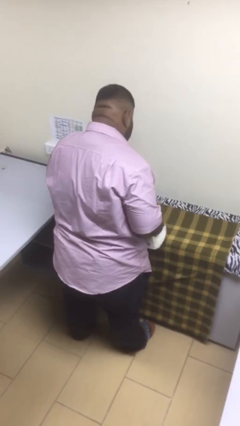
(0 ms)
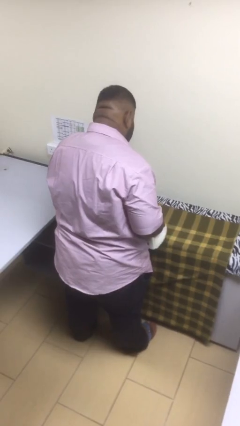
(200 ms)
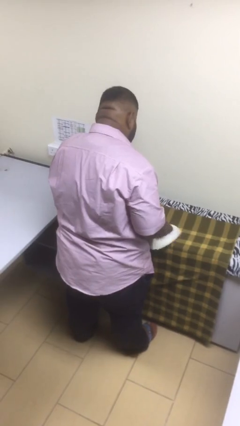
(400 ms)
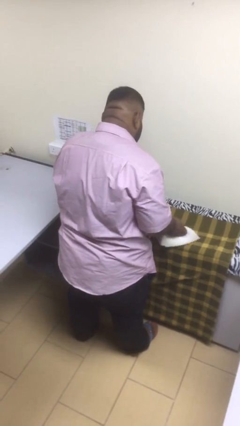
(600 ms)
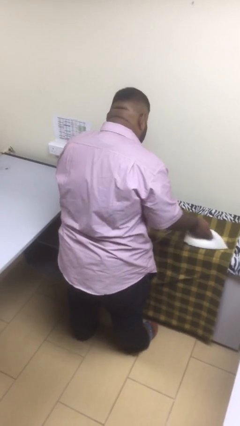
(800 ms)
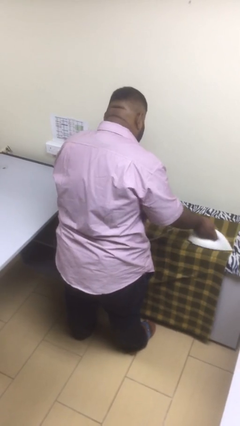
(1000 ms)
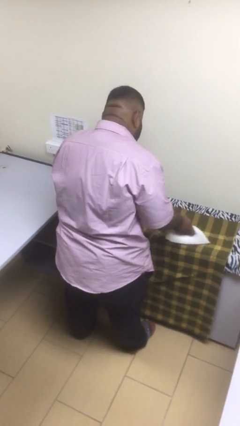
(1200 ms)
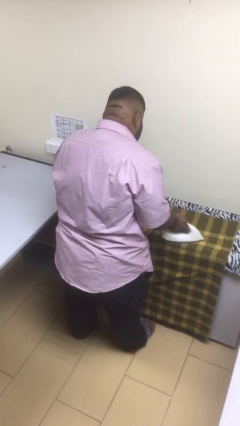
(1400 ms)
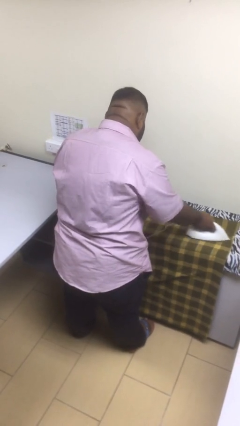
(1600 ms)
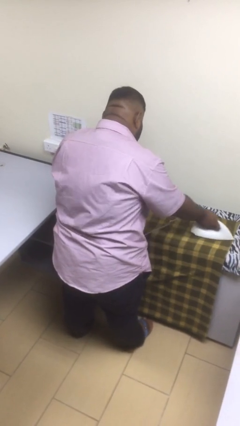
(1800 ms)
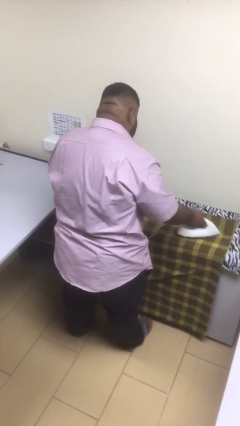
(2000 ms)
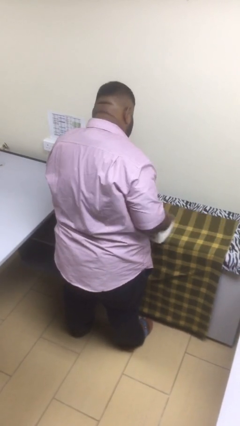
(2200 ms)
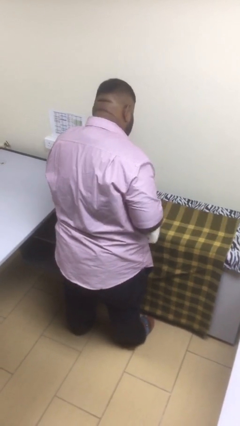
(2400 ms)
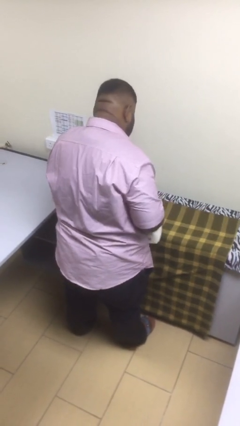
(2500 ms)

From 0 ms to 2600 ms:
person irons clothes

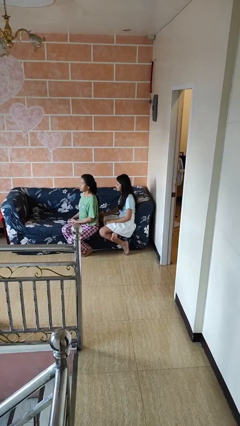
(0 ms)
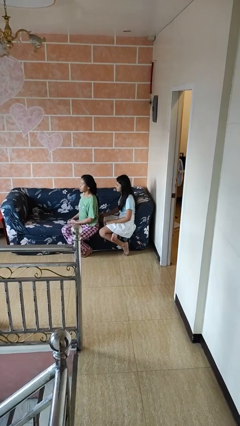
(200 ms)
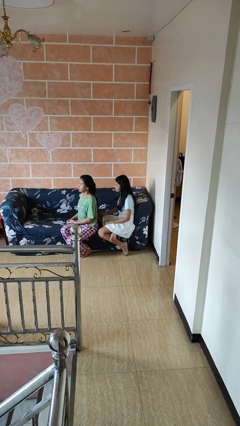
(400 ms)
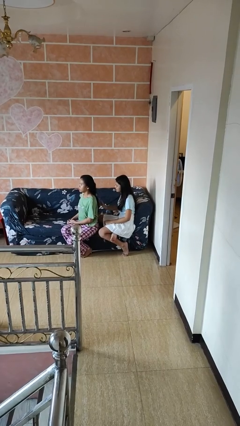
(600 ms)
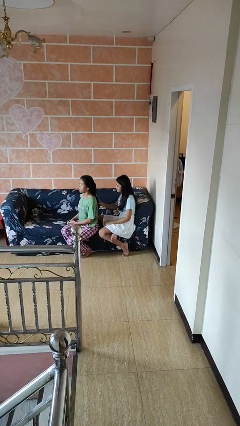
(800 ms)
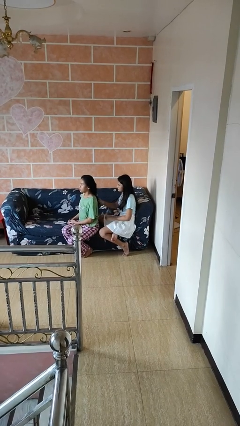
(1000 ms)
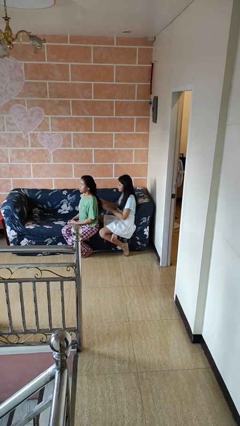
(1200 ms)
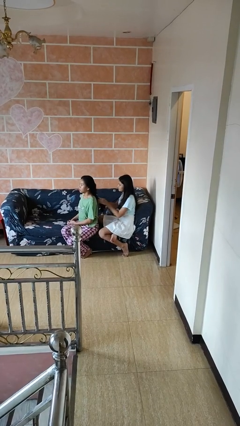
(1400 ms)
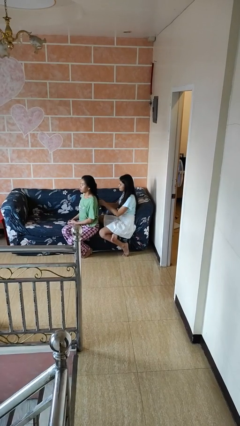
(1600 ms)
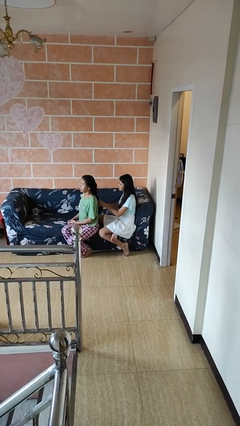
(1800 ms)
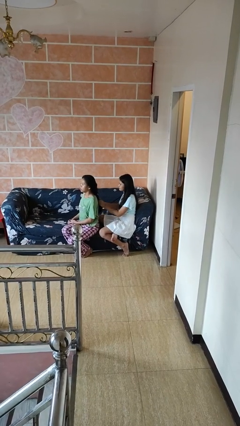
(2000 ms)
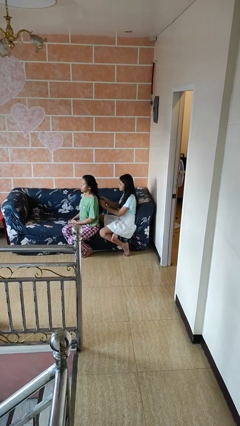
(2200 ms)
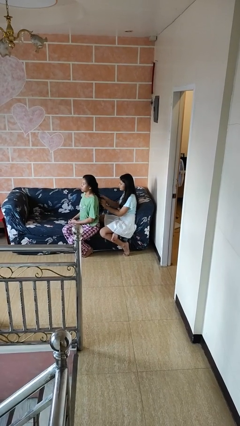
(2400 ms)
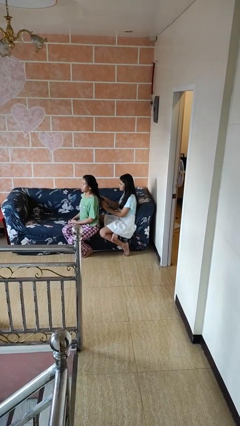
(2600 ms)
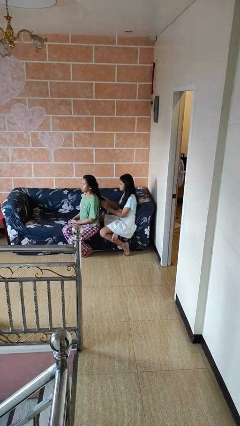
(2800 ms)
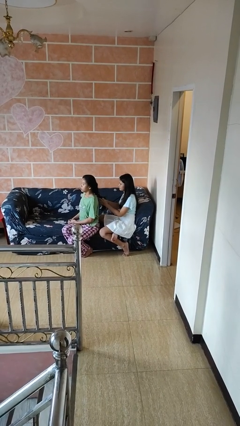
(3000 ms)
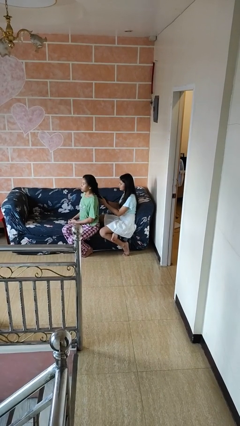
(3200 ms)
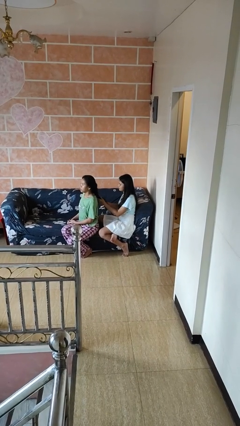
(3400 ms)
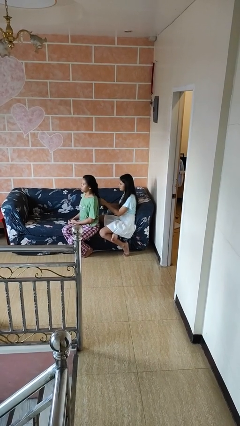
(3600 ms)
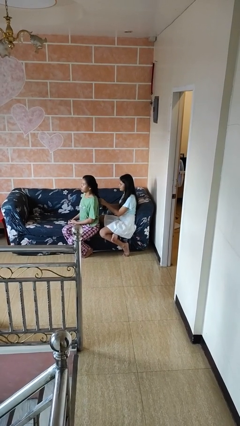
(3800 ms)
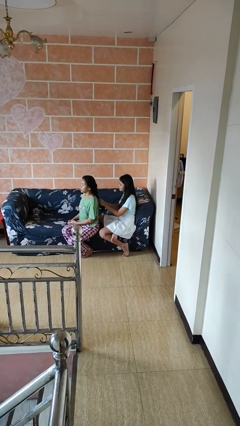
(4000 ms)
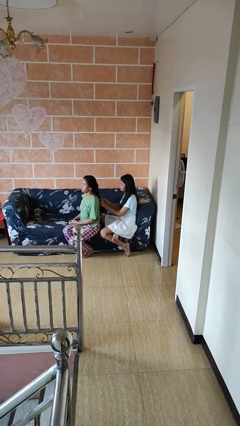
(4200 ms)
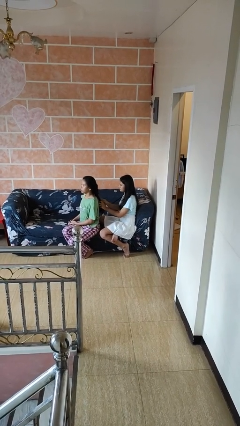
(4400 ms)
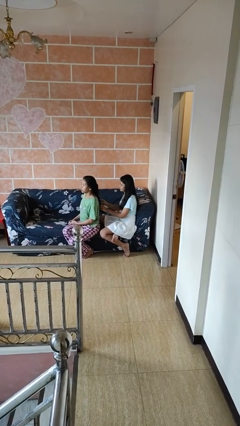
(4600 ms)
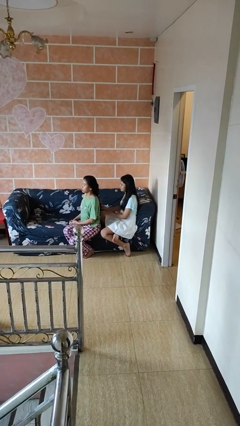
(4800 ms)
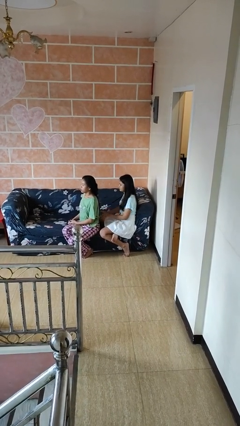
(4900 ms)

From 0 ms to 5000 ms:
person braids hair of person

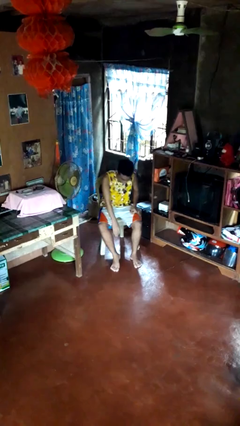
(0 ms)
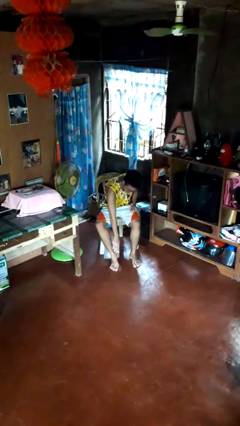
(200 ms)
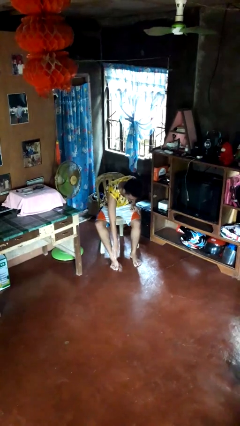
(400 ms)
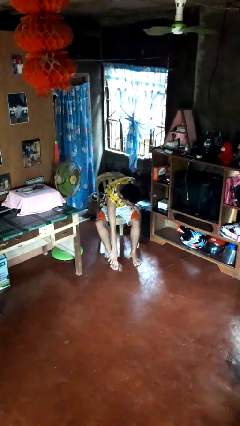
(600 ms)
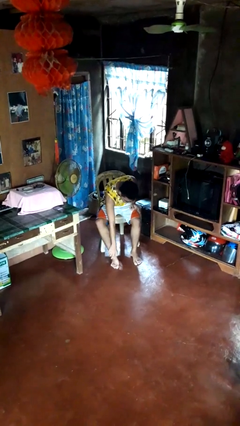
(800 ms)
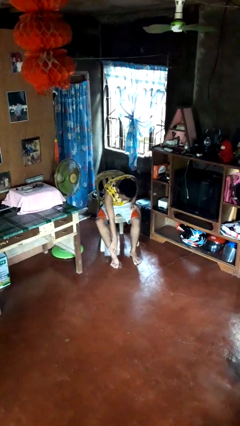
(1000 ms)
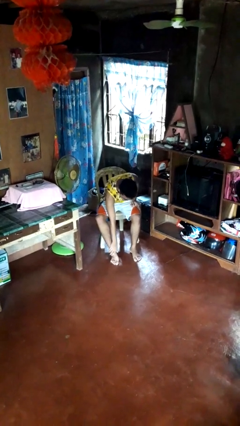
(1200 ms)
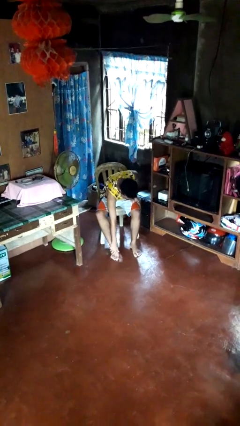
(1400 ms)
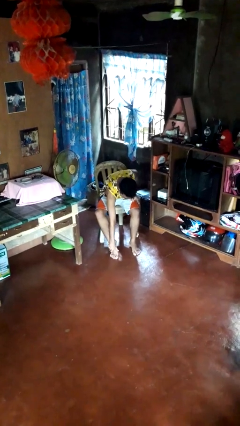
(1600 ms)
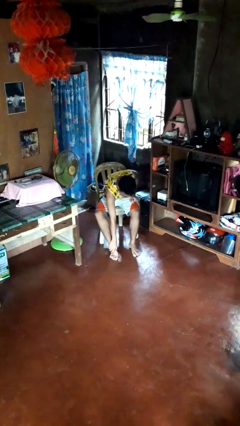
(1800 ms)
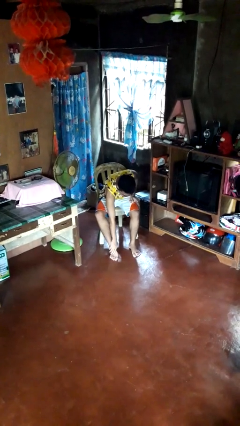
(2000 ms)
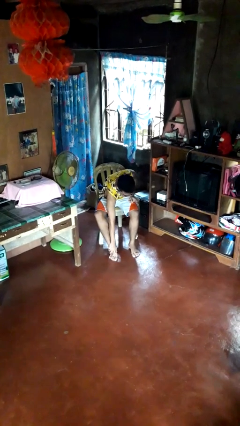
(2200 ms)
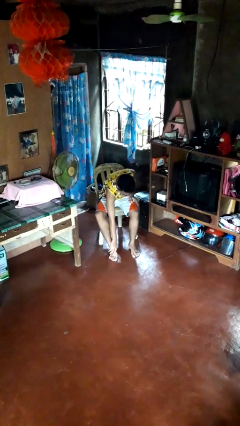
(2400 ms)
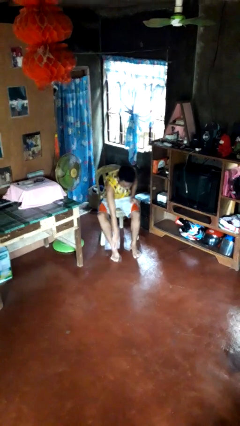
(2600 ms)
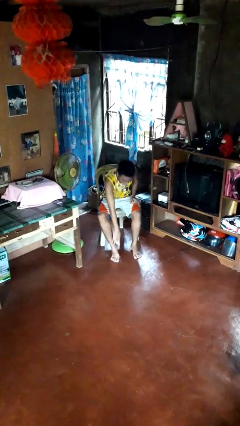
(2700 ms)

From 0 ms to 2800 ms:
person rubs foot

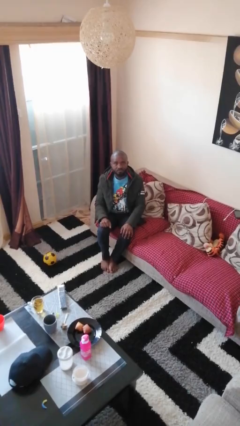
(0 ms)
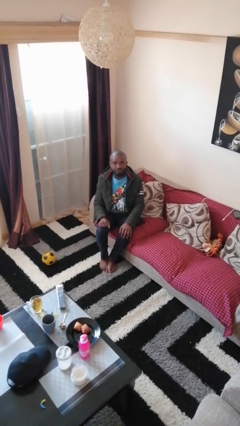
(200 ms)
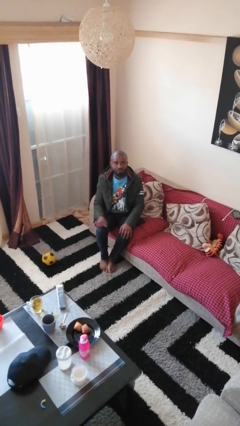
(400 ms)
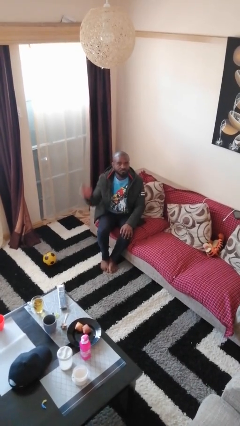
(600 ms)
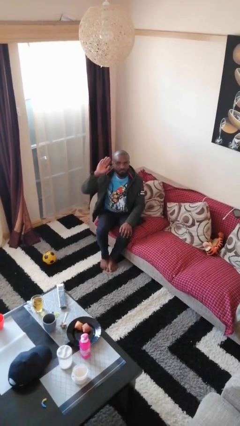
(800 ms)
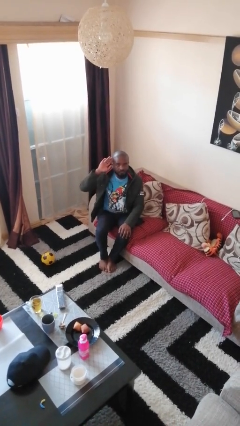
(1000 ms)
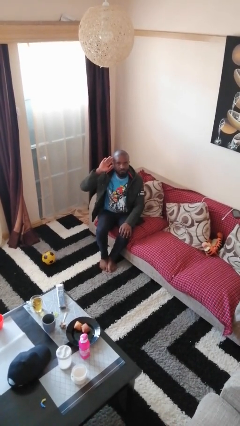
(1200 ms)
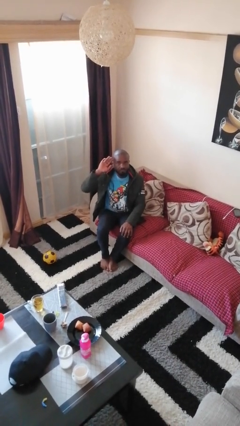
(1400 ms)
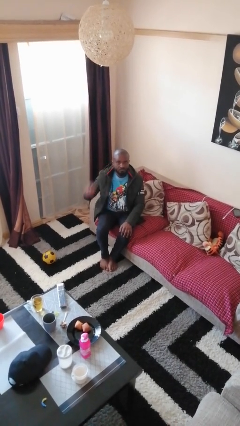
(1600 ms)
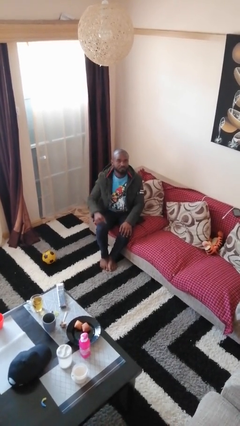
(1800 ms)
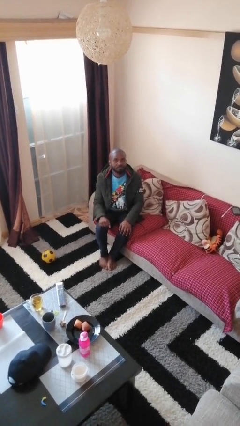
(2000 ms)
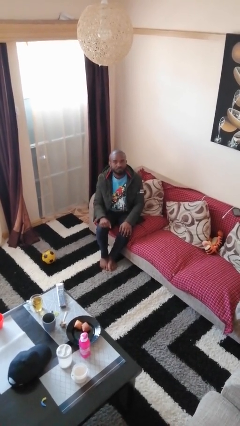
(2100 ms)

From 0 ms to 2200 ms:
person salutes

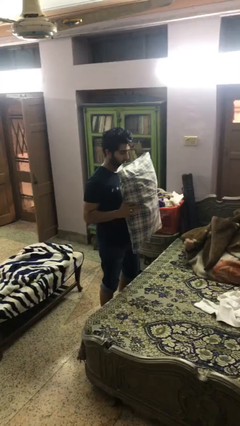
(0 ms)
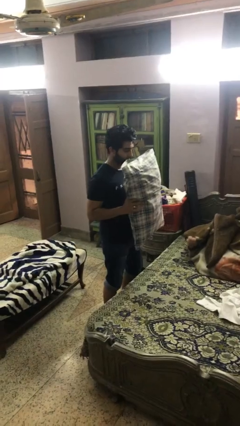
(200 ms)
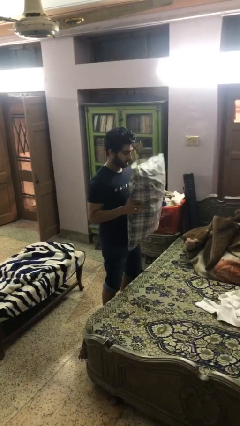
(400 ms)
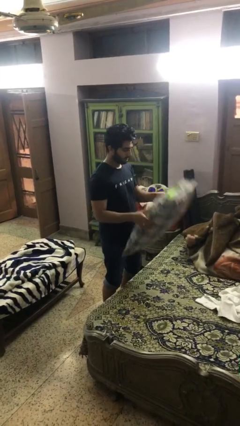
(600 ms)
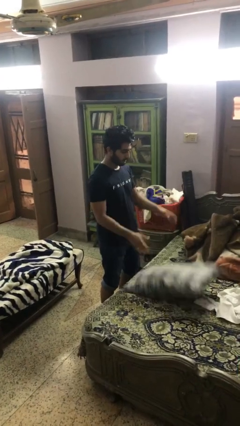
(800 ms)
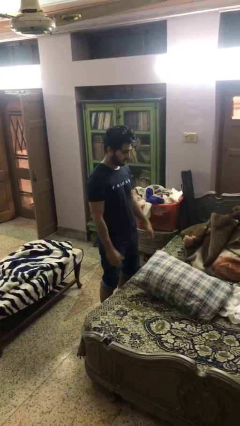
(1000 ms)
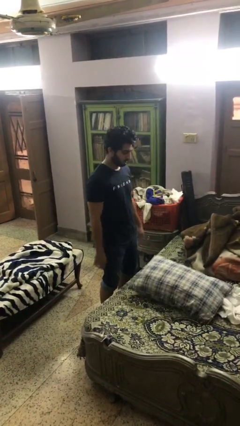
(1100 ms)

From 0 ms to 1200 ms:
person puts down object on bed

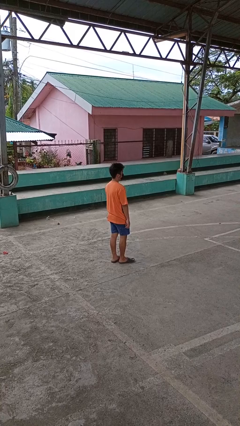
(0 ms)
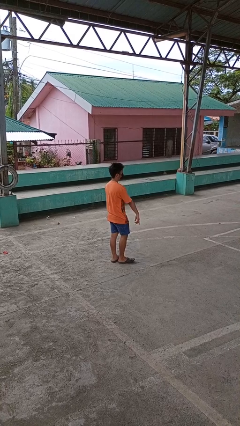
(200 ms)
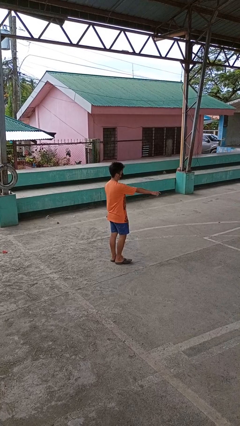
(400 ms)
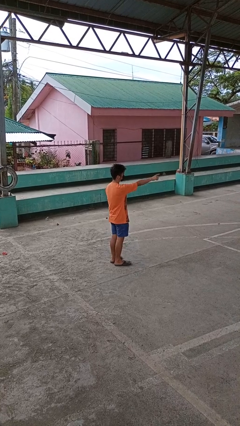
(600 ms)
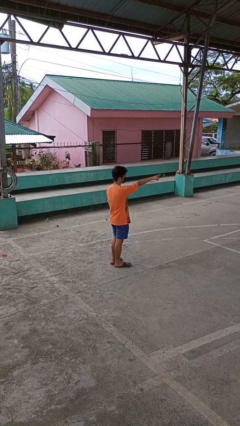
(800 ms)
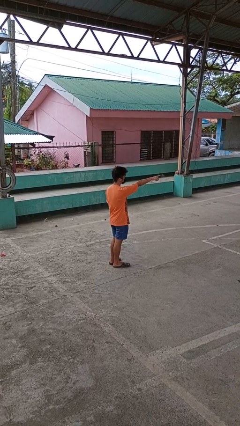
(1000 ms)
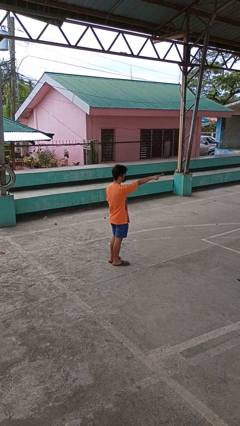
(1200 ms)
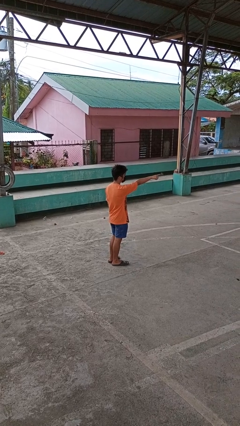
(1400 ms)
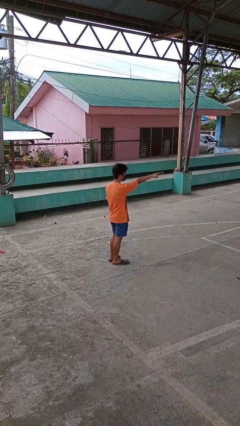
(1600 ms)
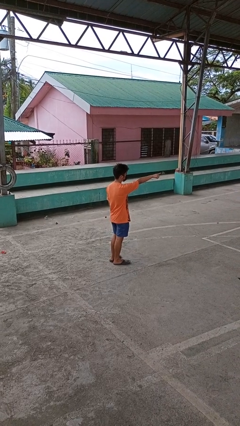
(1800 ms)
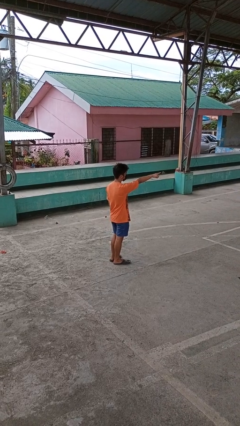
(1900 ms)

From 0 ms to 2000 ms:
person points at person

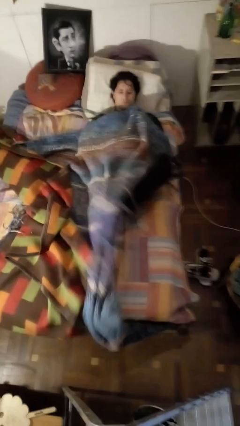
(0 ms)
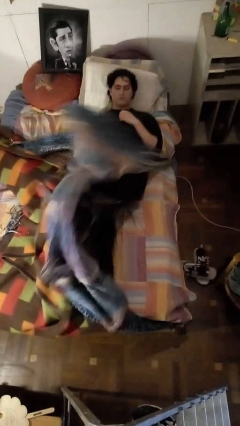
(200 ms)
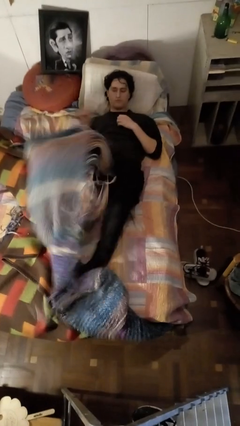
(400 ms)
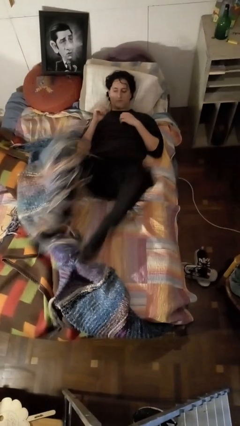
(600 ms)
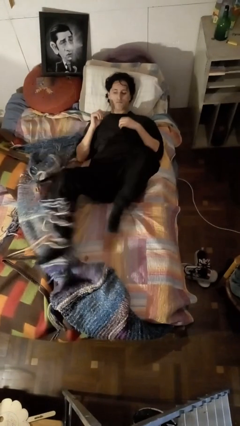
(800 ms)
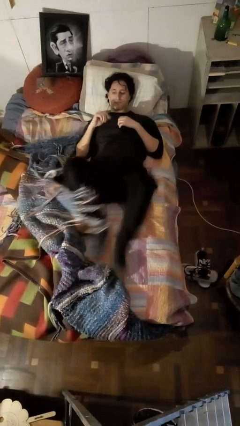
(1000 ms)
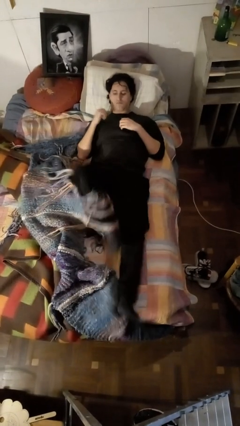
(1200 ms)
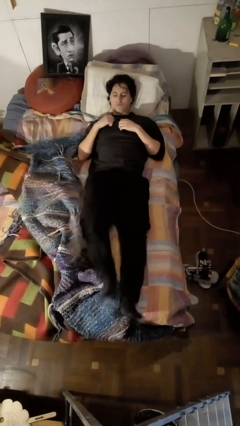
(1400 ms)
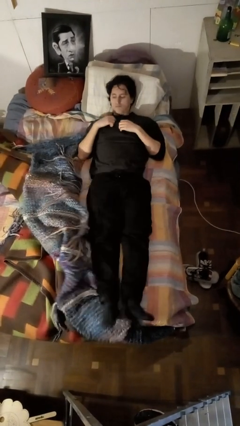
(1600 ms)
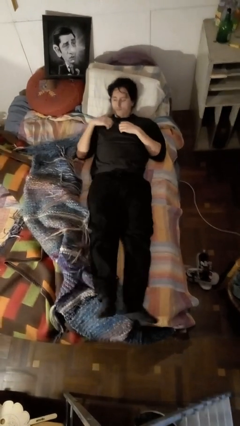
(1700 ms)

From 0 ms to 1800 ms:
person uncovers with bedsheets
